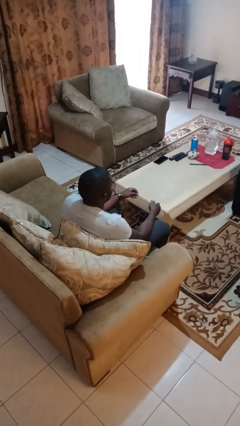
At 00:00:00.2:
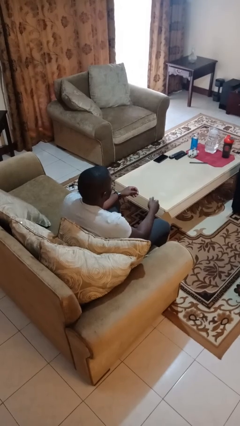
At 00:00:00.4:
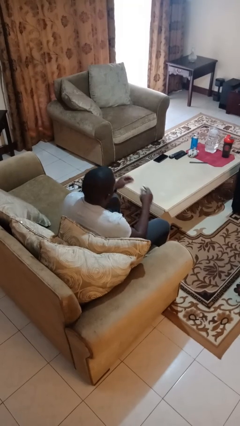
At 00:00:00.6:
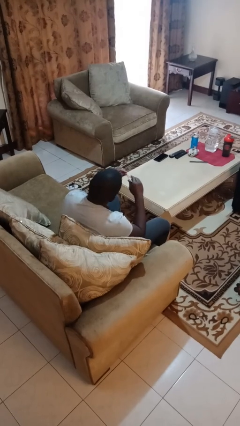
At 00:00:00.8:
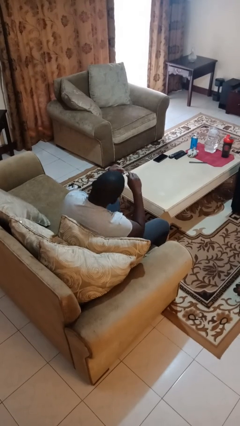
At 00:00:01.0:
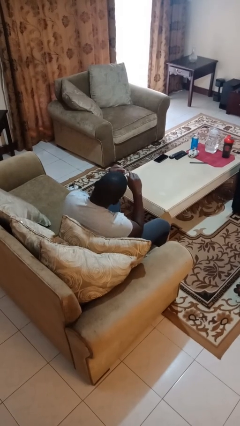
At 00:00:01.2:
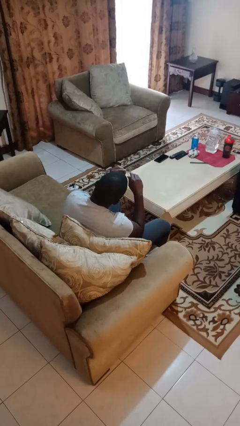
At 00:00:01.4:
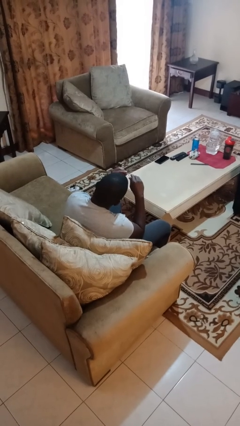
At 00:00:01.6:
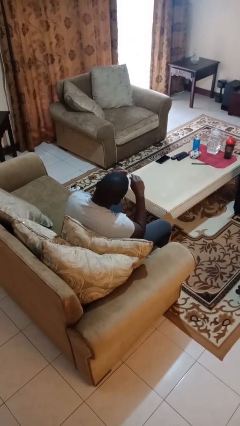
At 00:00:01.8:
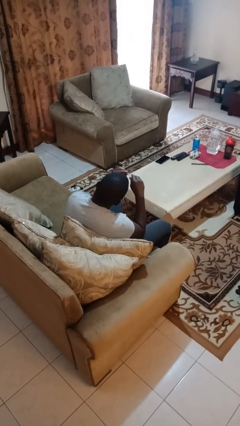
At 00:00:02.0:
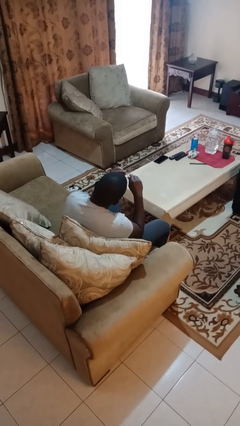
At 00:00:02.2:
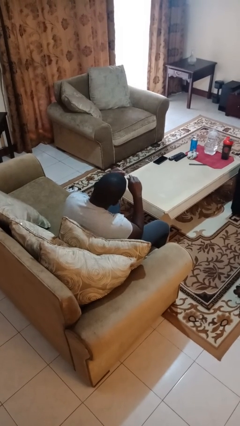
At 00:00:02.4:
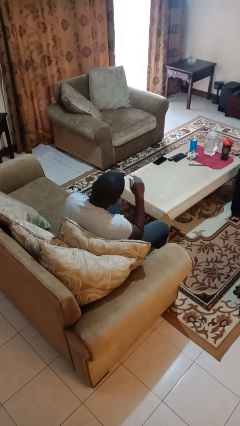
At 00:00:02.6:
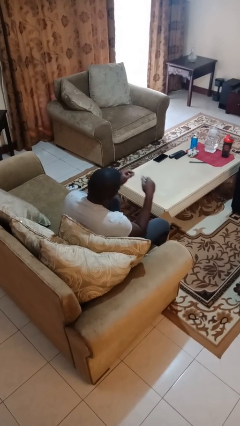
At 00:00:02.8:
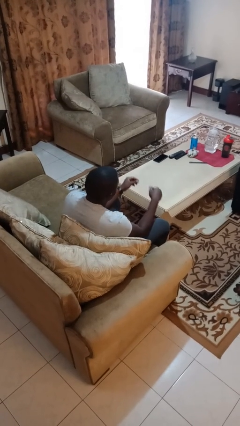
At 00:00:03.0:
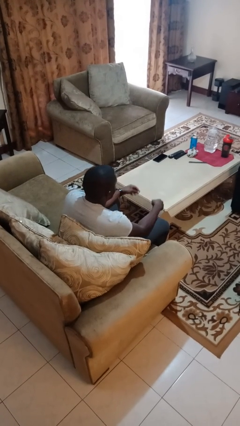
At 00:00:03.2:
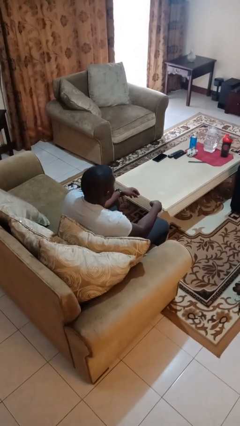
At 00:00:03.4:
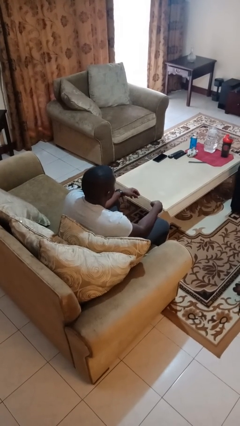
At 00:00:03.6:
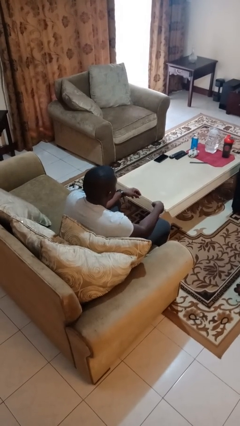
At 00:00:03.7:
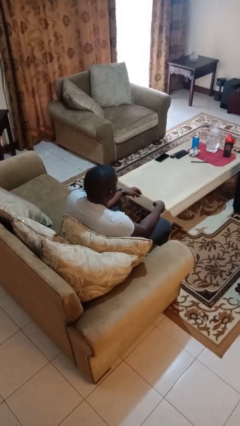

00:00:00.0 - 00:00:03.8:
person clips fingernails

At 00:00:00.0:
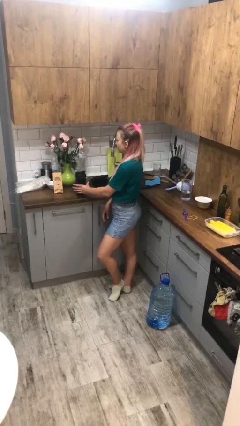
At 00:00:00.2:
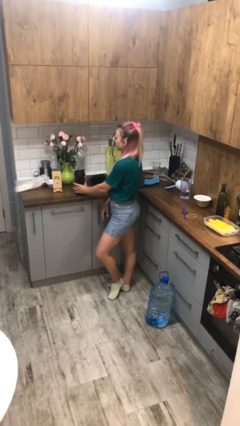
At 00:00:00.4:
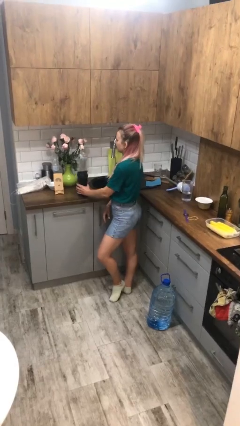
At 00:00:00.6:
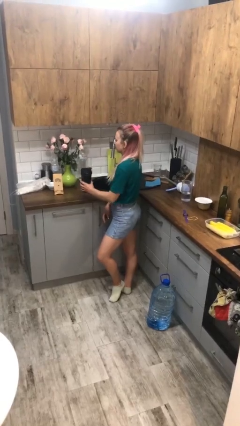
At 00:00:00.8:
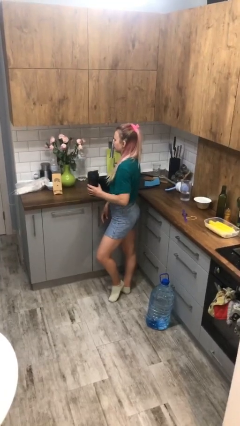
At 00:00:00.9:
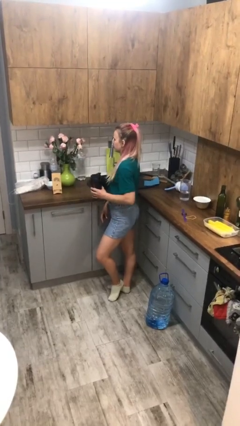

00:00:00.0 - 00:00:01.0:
person picks up object from countertop

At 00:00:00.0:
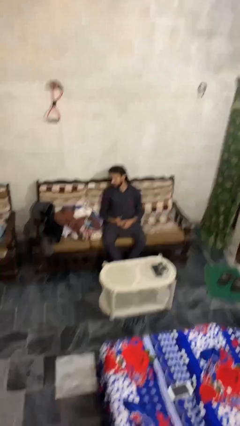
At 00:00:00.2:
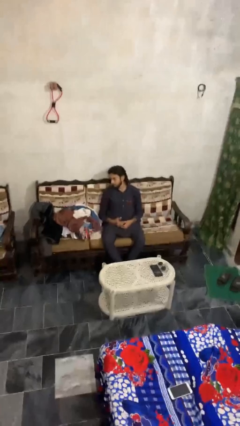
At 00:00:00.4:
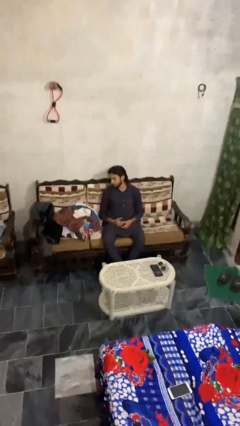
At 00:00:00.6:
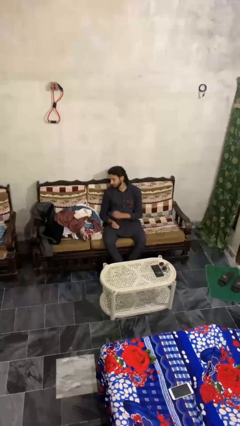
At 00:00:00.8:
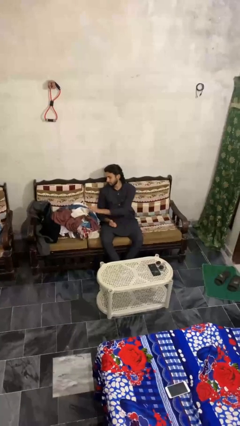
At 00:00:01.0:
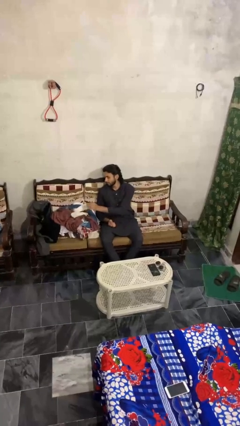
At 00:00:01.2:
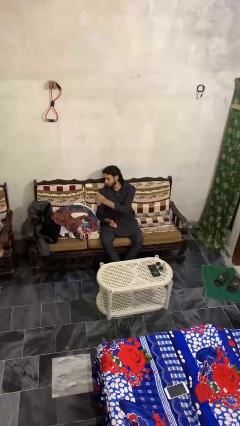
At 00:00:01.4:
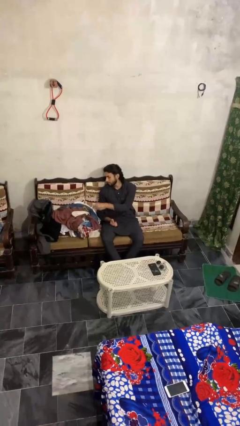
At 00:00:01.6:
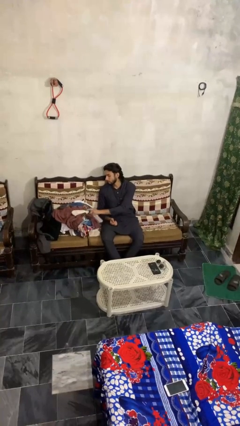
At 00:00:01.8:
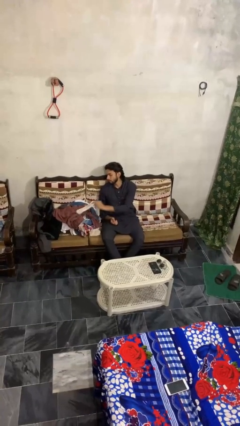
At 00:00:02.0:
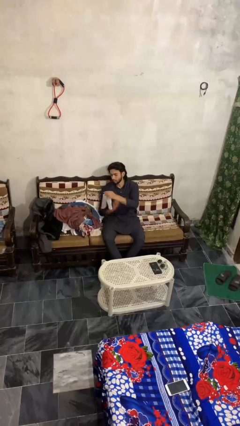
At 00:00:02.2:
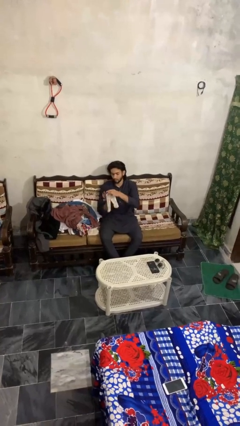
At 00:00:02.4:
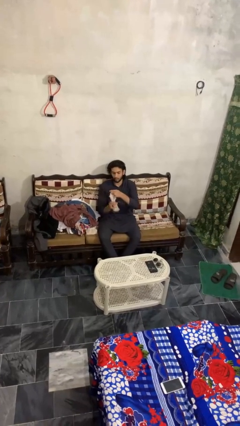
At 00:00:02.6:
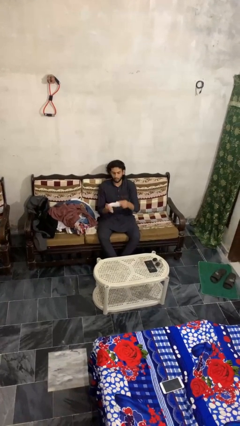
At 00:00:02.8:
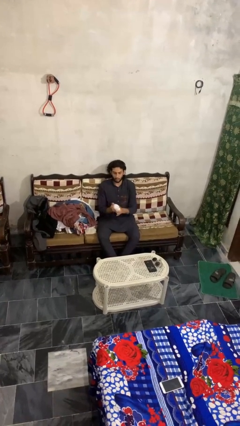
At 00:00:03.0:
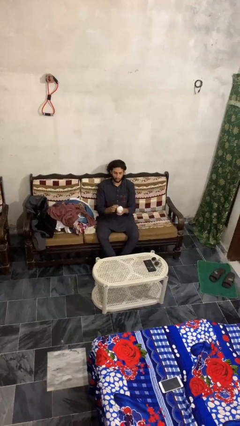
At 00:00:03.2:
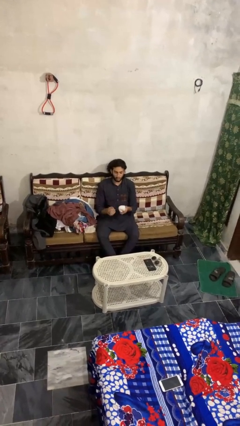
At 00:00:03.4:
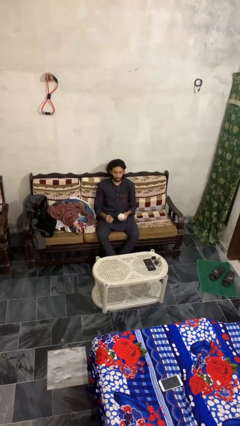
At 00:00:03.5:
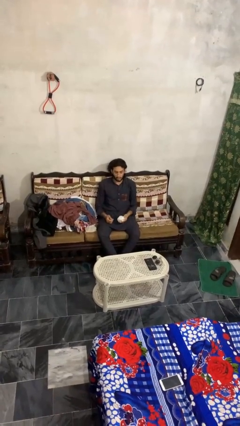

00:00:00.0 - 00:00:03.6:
person folds socks

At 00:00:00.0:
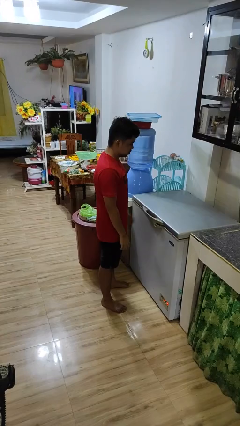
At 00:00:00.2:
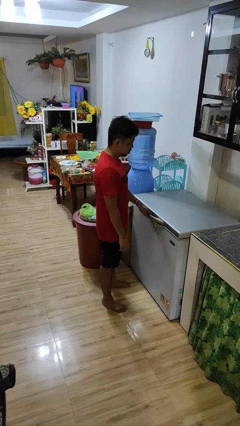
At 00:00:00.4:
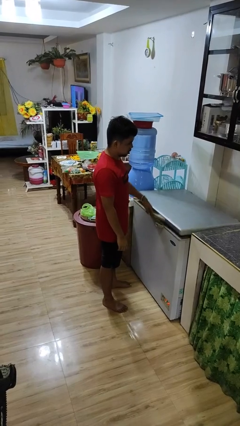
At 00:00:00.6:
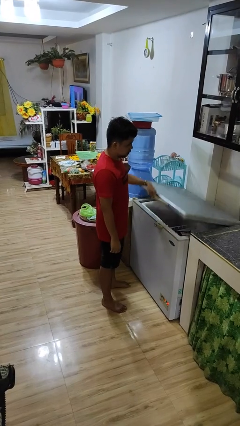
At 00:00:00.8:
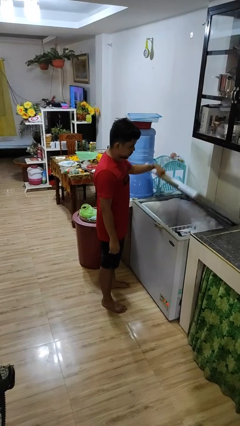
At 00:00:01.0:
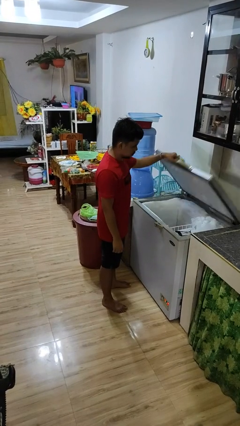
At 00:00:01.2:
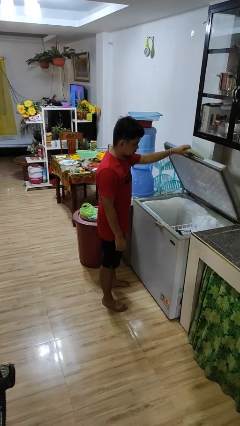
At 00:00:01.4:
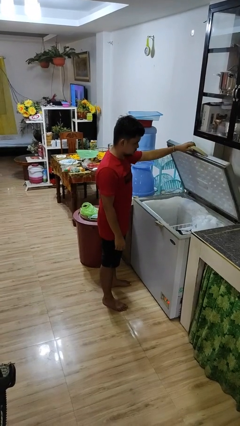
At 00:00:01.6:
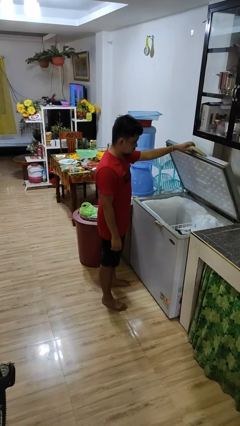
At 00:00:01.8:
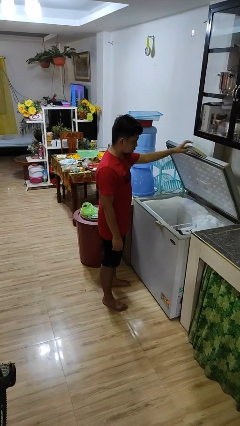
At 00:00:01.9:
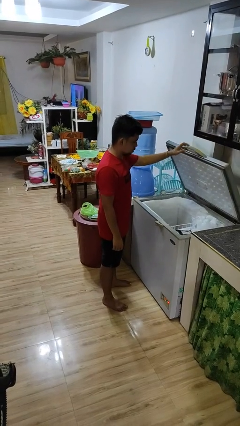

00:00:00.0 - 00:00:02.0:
person opens refrigerator

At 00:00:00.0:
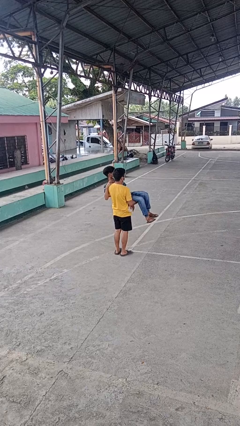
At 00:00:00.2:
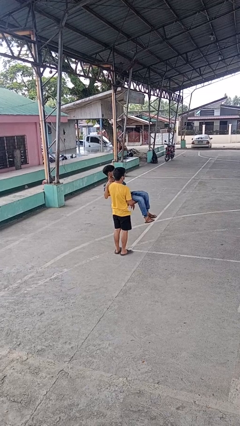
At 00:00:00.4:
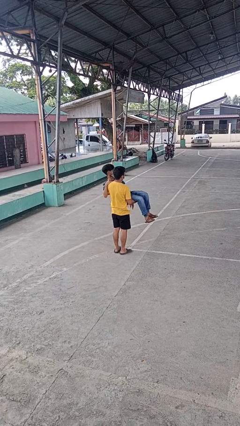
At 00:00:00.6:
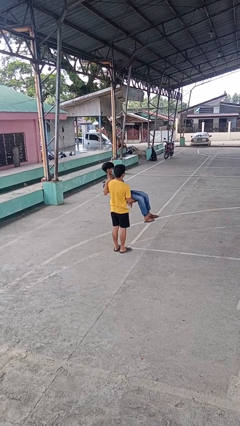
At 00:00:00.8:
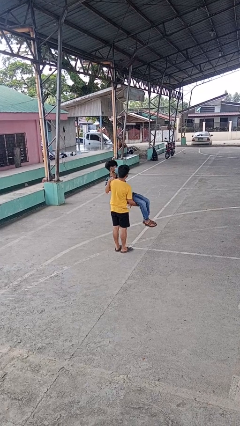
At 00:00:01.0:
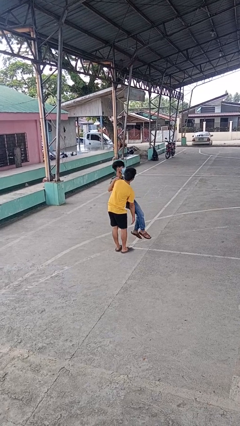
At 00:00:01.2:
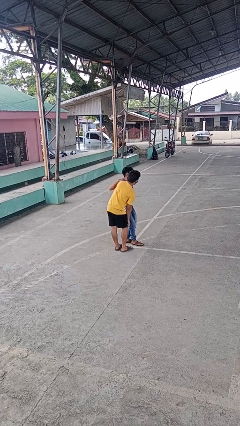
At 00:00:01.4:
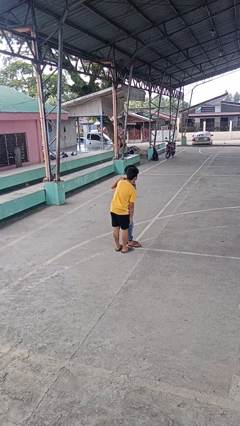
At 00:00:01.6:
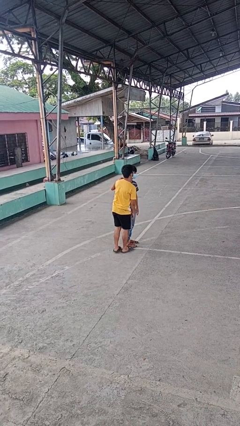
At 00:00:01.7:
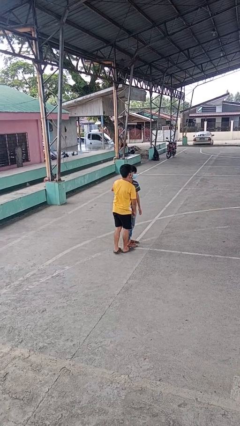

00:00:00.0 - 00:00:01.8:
person puts down person

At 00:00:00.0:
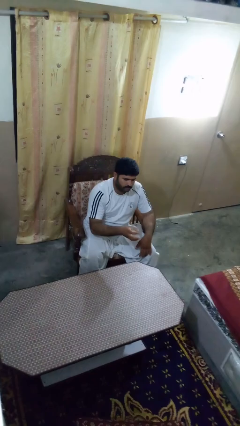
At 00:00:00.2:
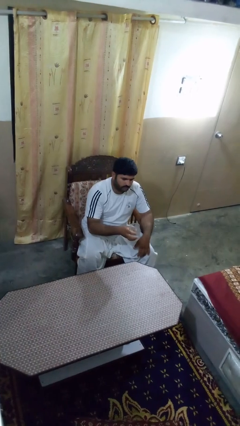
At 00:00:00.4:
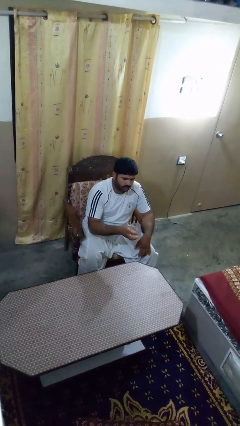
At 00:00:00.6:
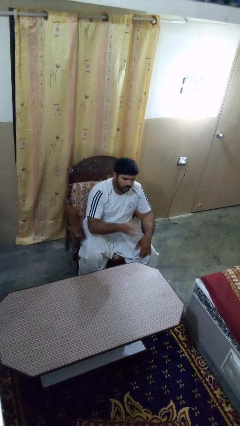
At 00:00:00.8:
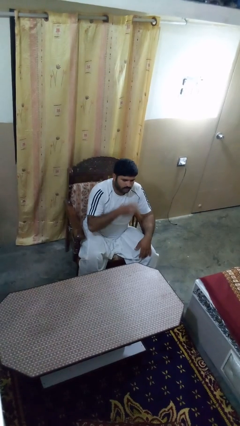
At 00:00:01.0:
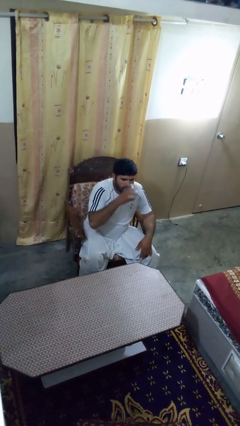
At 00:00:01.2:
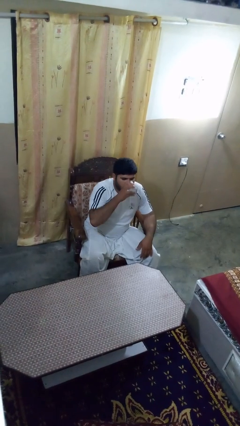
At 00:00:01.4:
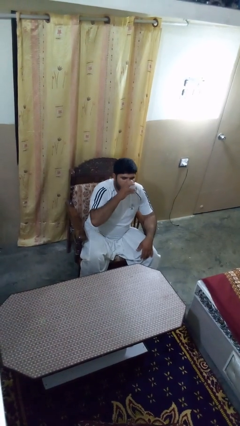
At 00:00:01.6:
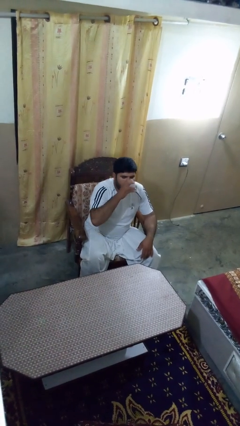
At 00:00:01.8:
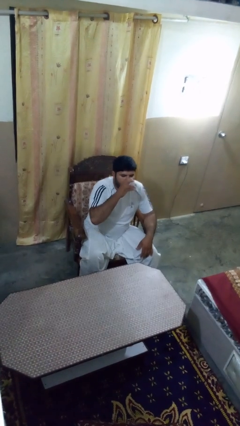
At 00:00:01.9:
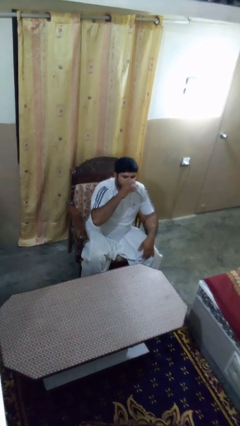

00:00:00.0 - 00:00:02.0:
person drinks from shotglass

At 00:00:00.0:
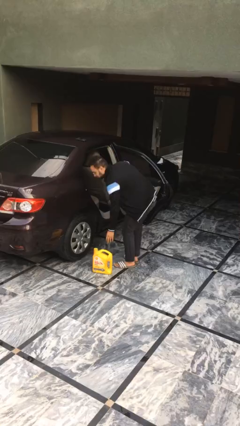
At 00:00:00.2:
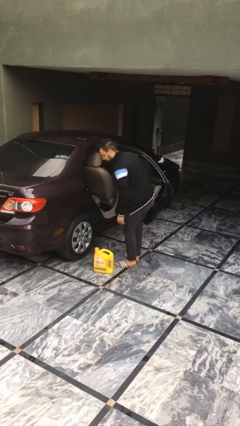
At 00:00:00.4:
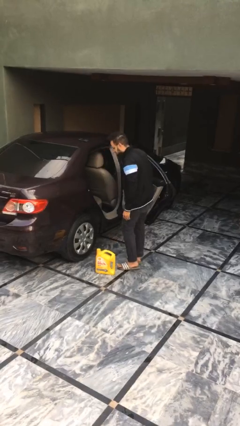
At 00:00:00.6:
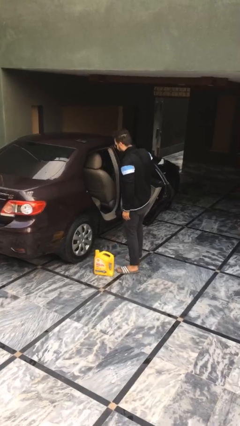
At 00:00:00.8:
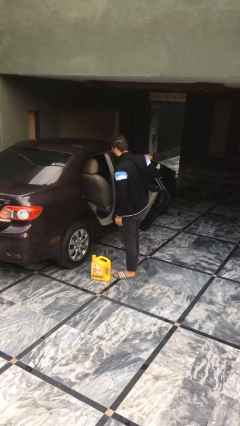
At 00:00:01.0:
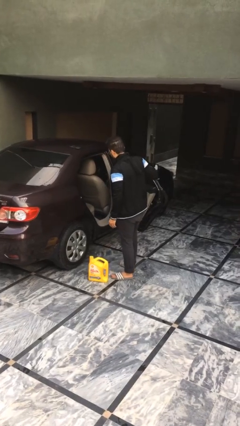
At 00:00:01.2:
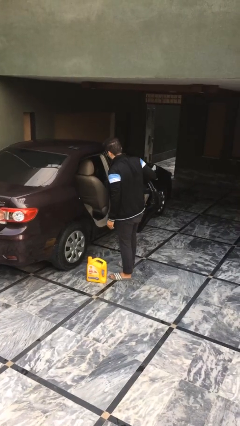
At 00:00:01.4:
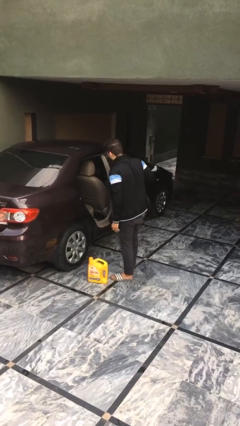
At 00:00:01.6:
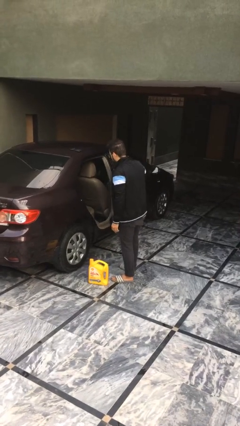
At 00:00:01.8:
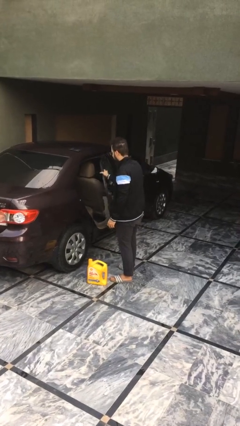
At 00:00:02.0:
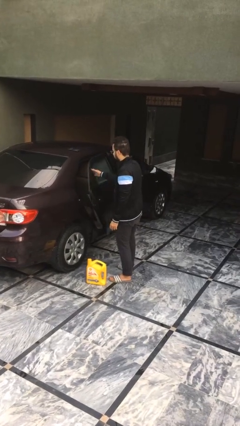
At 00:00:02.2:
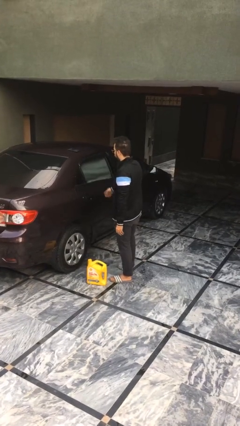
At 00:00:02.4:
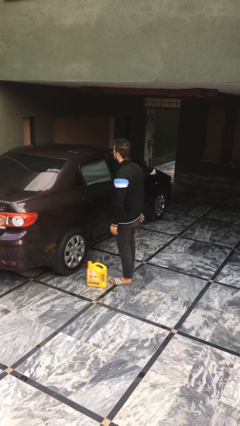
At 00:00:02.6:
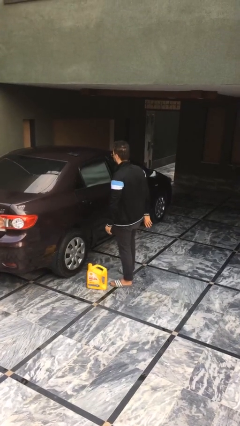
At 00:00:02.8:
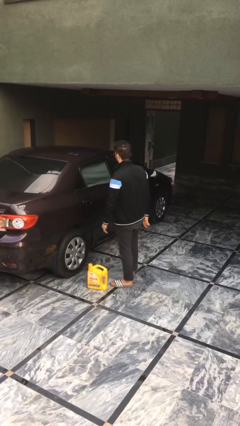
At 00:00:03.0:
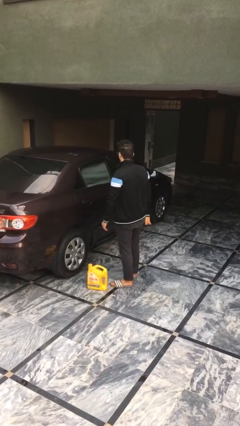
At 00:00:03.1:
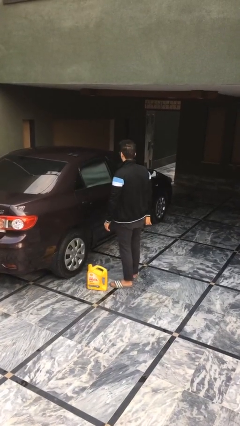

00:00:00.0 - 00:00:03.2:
person closes car door
